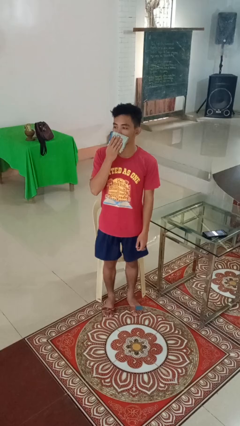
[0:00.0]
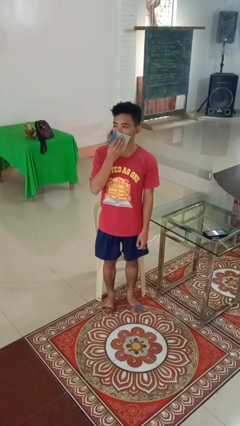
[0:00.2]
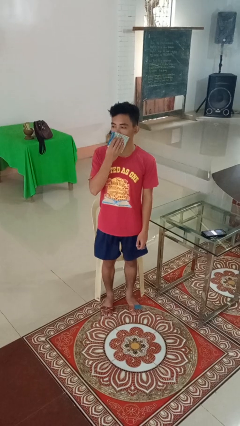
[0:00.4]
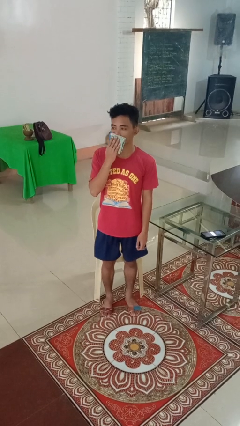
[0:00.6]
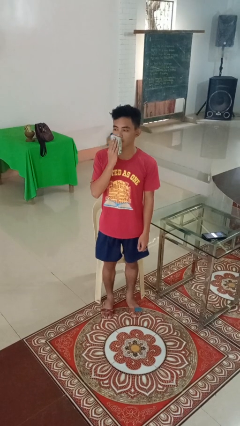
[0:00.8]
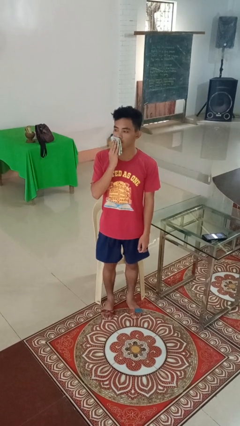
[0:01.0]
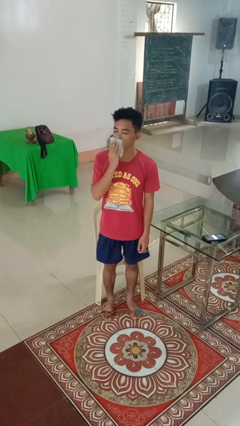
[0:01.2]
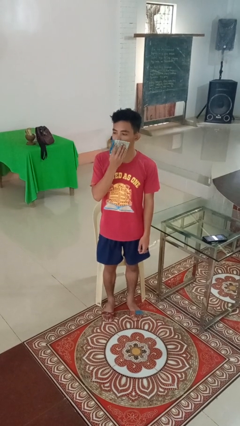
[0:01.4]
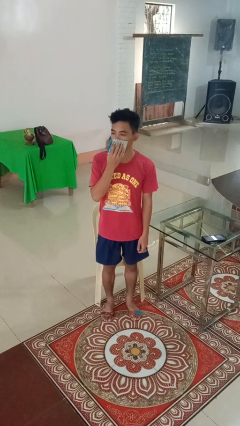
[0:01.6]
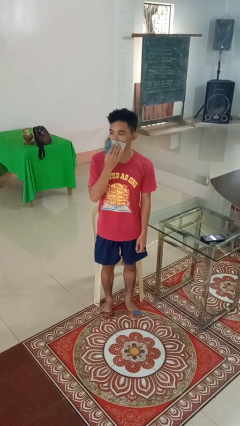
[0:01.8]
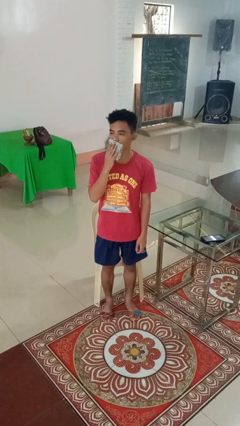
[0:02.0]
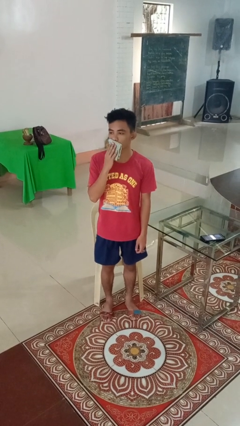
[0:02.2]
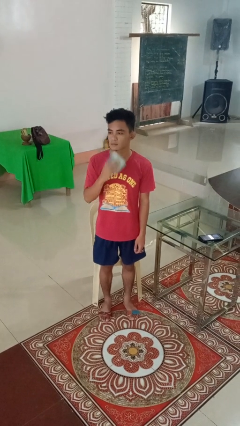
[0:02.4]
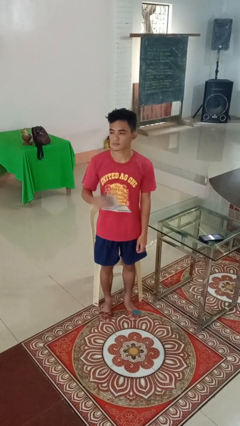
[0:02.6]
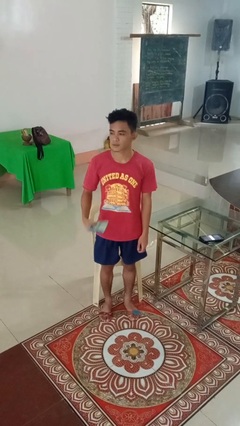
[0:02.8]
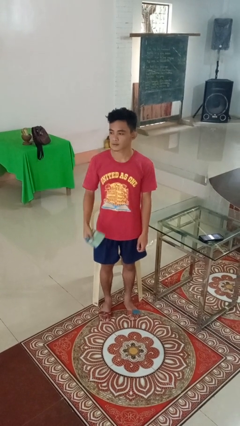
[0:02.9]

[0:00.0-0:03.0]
person wipes mouth with napkin

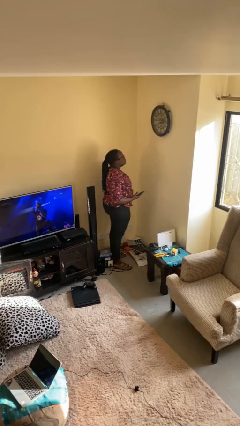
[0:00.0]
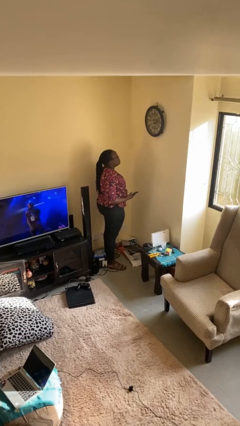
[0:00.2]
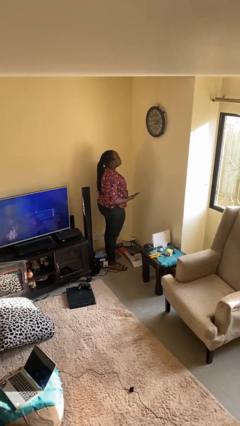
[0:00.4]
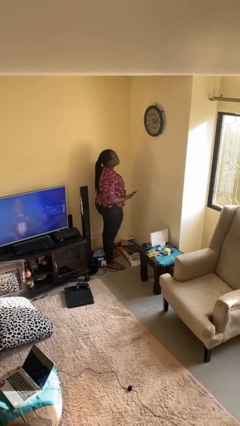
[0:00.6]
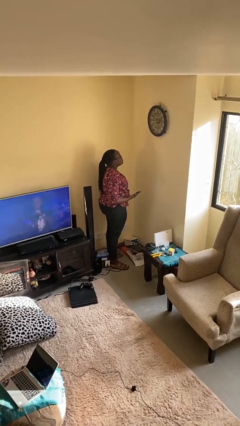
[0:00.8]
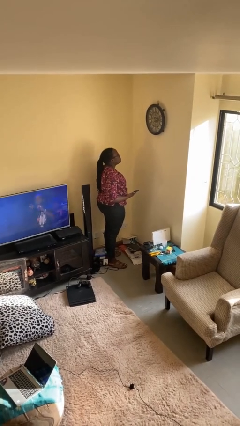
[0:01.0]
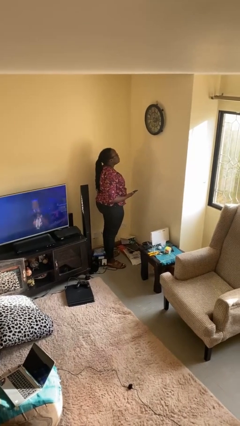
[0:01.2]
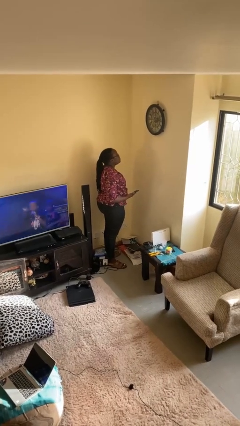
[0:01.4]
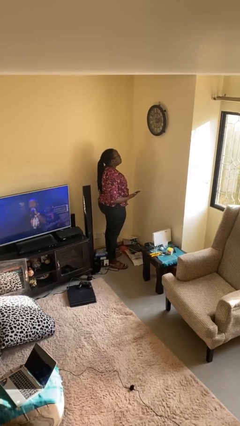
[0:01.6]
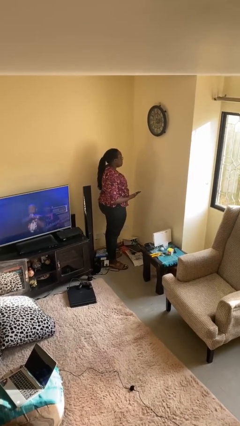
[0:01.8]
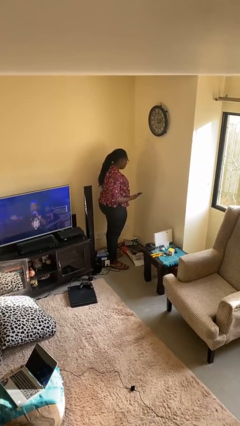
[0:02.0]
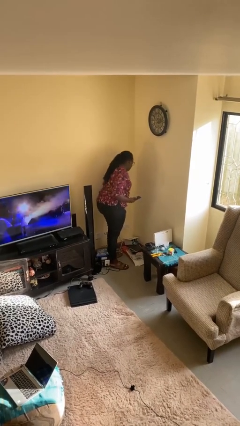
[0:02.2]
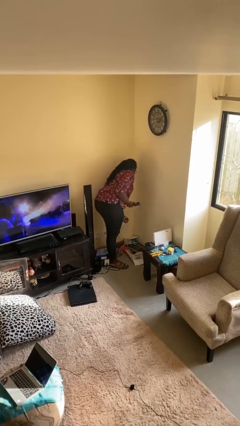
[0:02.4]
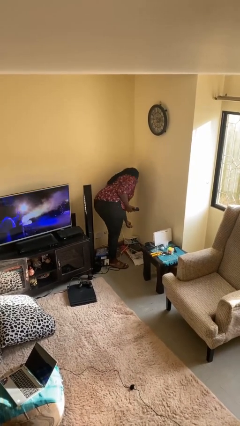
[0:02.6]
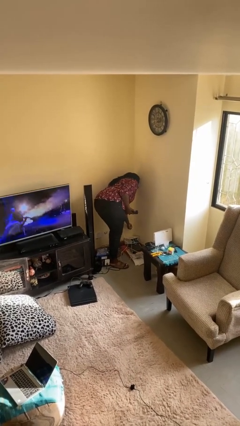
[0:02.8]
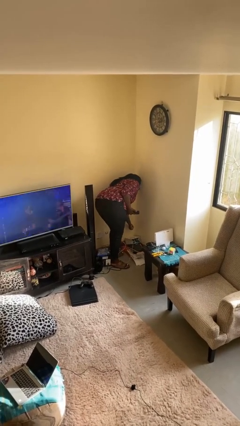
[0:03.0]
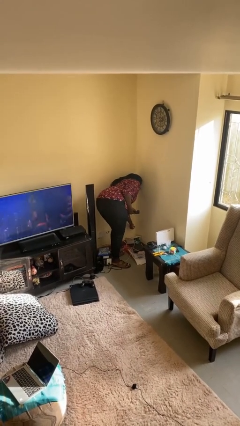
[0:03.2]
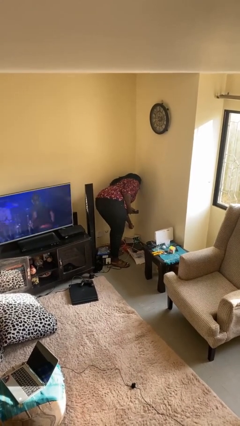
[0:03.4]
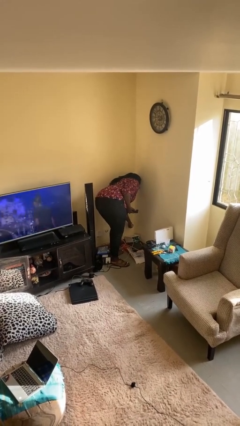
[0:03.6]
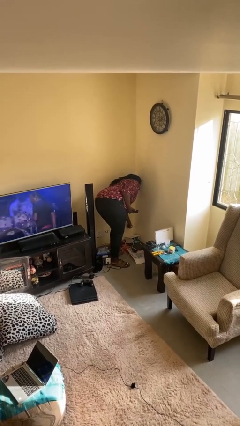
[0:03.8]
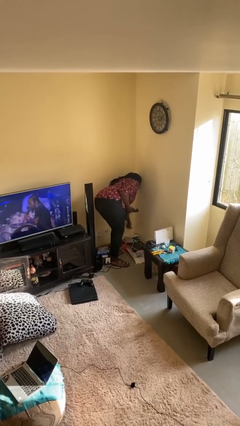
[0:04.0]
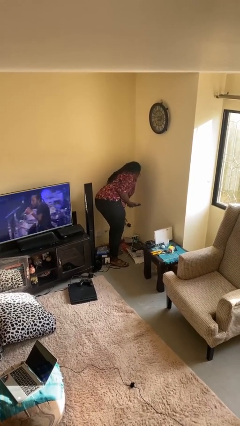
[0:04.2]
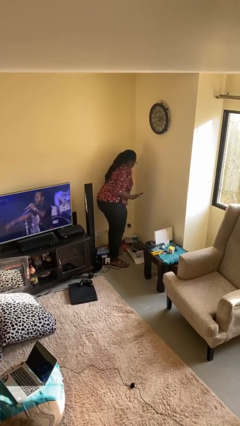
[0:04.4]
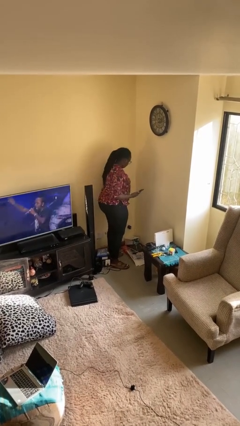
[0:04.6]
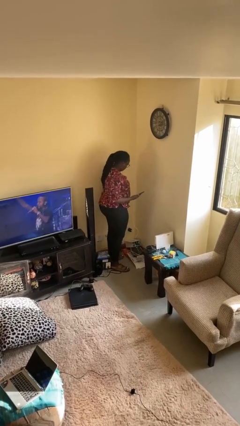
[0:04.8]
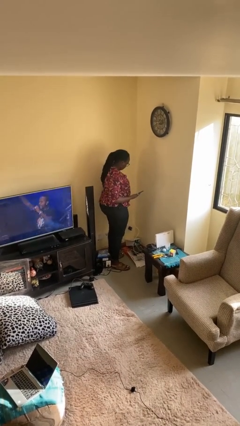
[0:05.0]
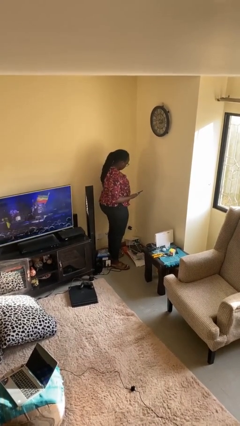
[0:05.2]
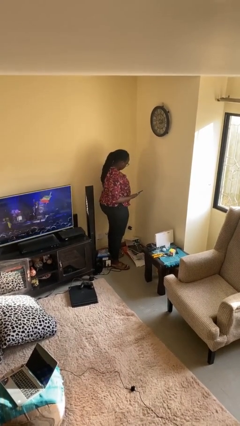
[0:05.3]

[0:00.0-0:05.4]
person plugs into electrical socket

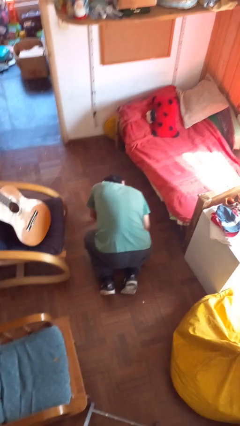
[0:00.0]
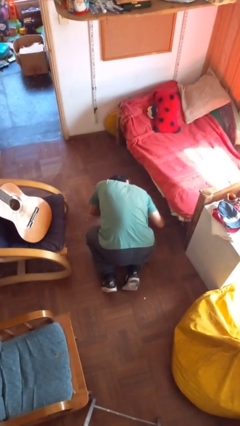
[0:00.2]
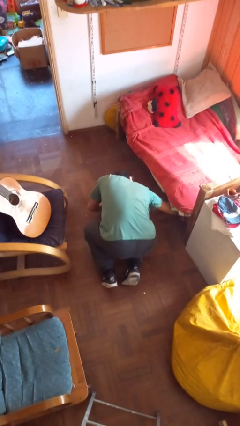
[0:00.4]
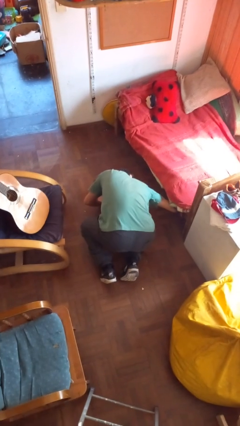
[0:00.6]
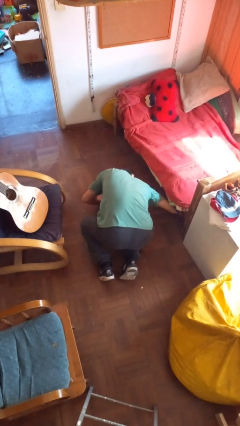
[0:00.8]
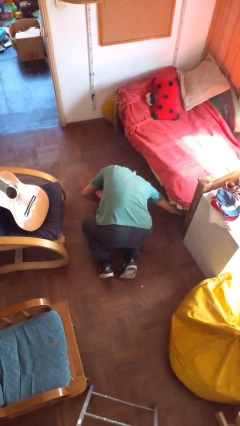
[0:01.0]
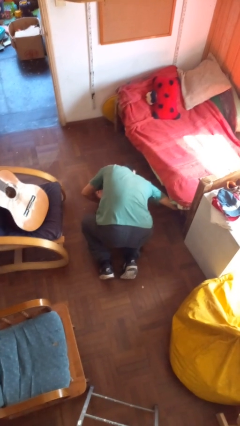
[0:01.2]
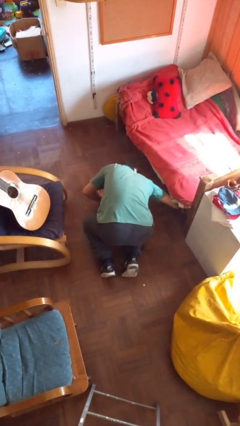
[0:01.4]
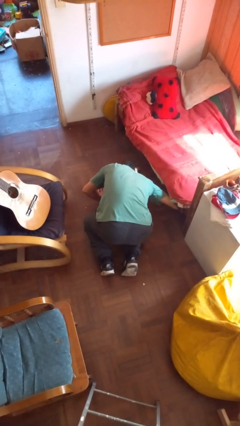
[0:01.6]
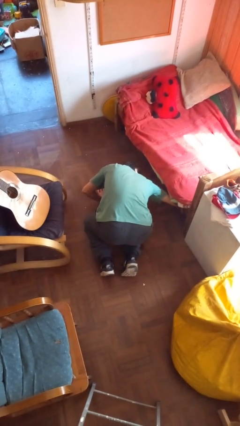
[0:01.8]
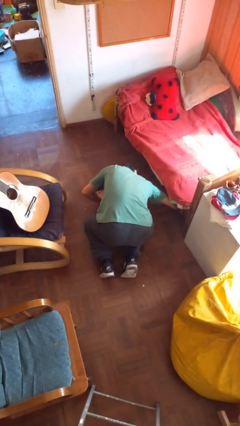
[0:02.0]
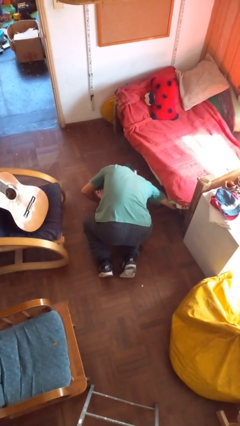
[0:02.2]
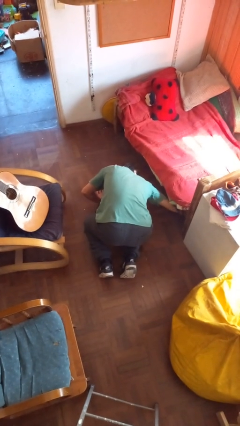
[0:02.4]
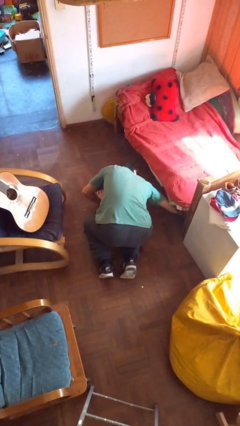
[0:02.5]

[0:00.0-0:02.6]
person searches under bed

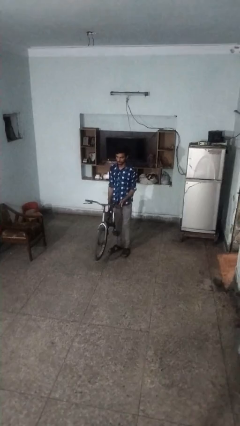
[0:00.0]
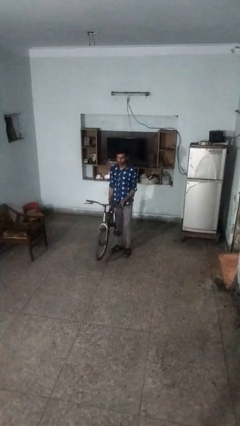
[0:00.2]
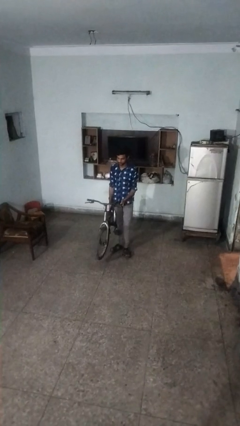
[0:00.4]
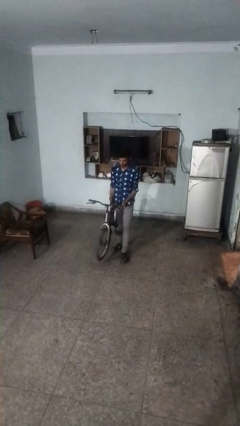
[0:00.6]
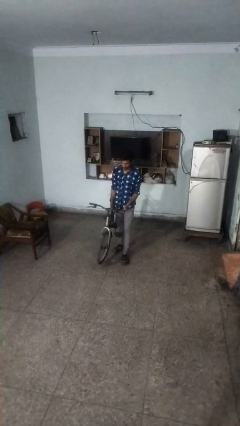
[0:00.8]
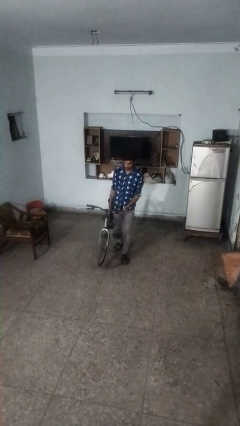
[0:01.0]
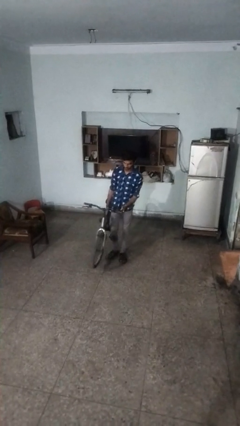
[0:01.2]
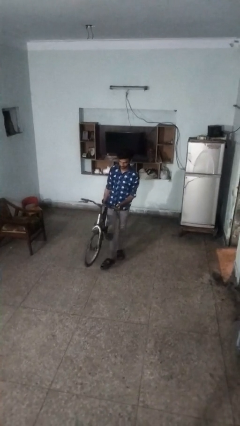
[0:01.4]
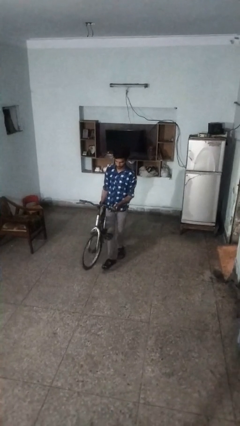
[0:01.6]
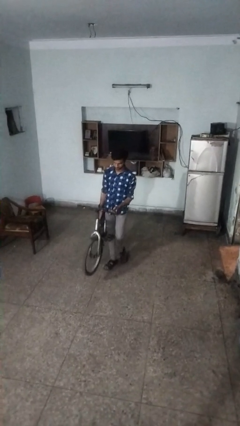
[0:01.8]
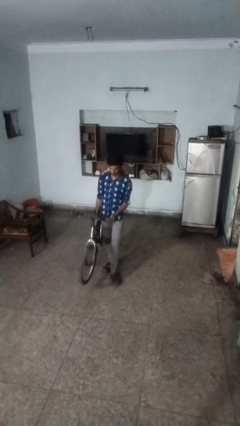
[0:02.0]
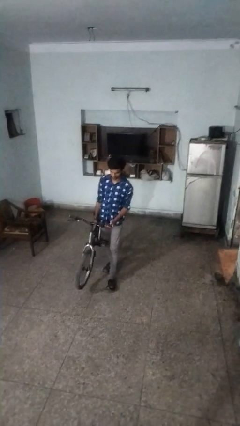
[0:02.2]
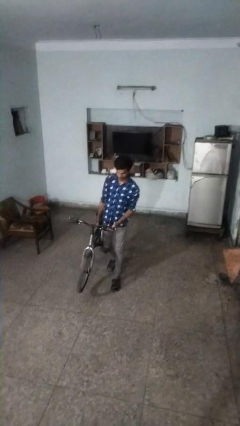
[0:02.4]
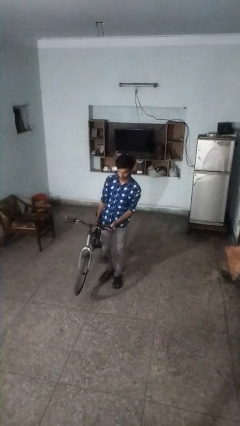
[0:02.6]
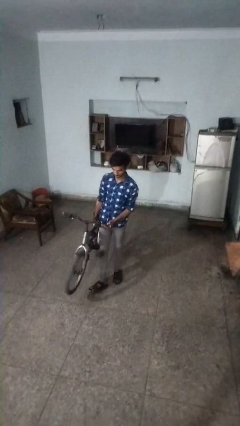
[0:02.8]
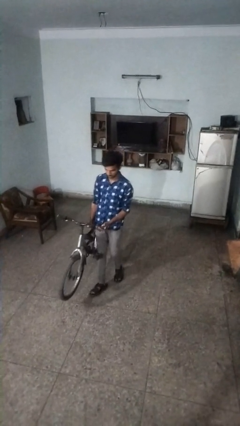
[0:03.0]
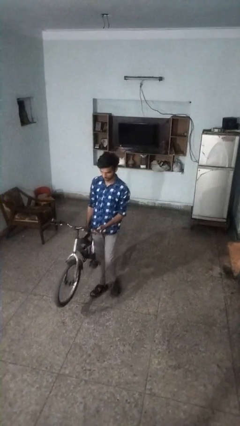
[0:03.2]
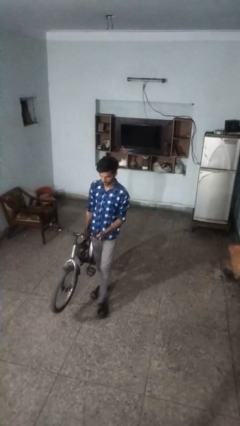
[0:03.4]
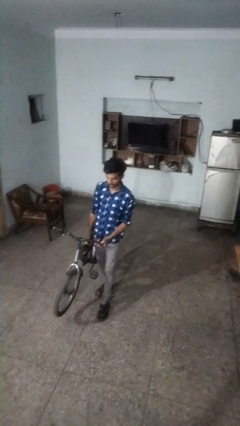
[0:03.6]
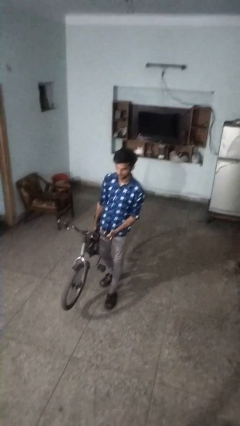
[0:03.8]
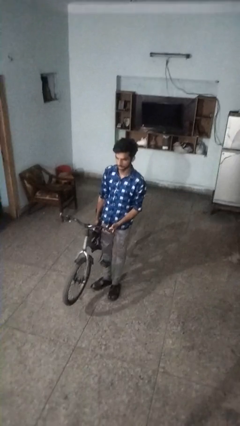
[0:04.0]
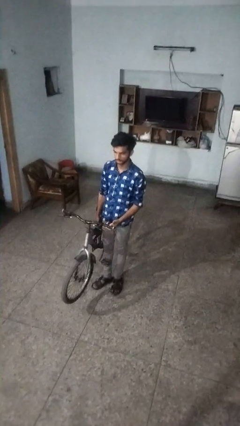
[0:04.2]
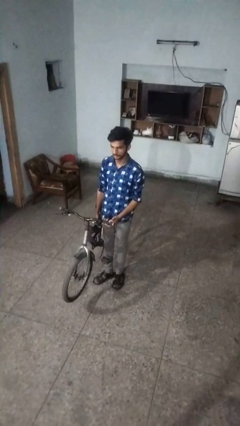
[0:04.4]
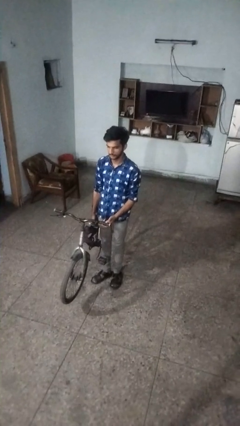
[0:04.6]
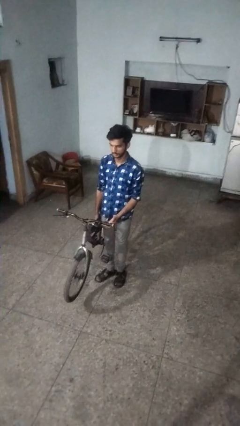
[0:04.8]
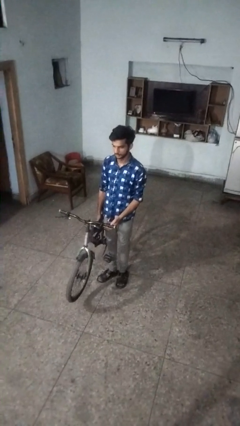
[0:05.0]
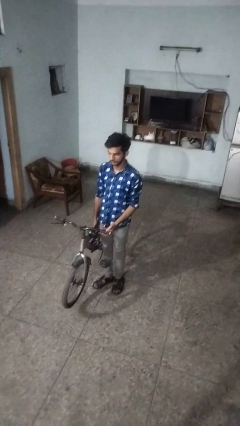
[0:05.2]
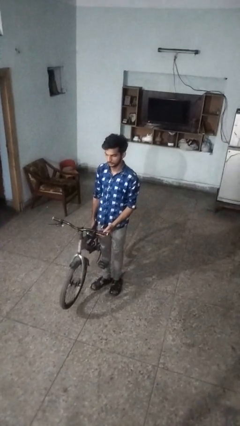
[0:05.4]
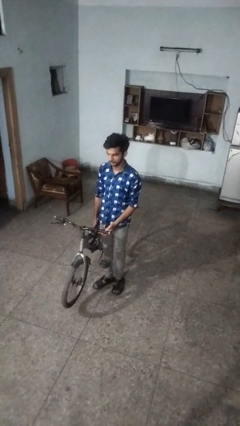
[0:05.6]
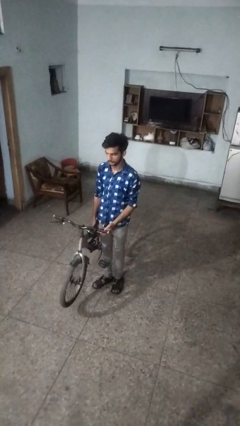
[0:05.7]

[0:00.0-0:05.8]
person carries bicycle

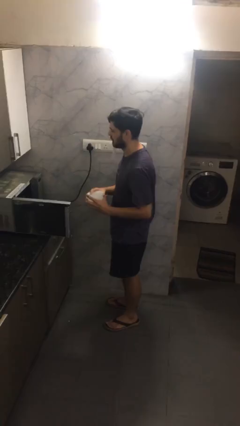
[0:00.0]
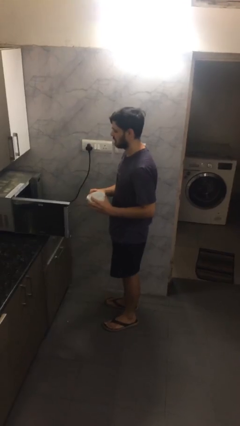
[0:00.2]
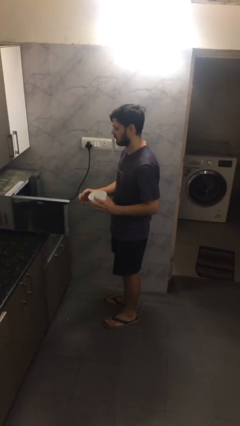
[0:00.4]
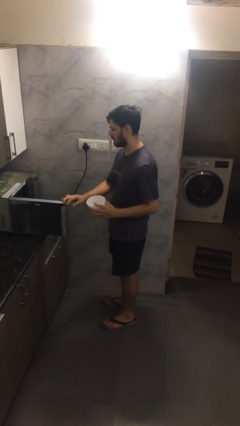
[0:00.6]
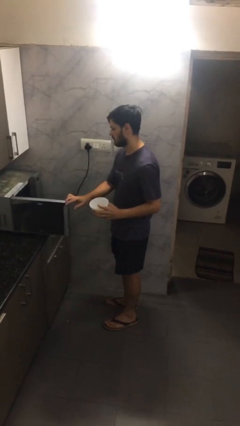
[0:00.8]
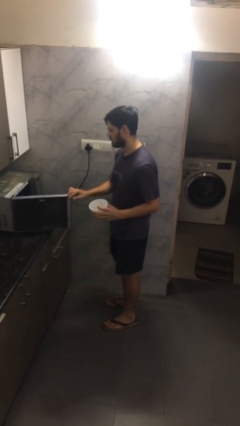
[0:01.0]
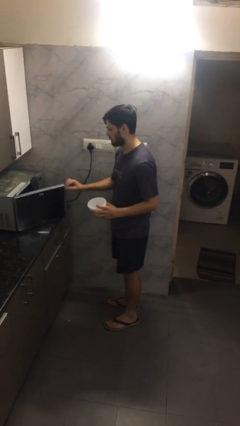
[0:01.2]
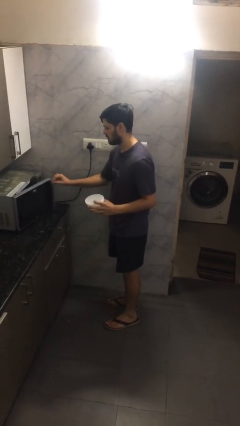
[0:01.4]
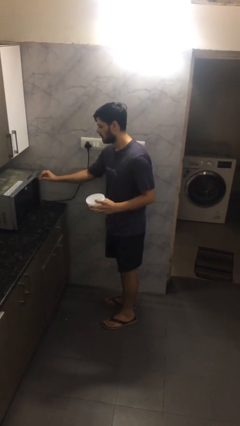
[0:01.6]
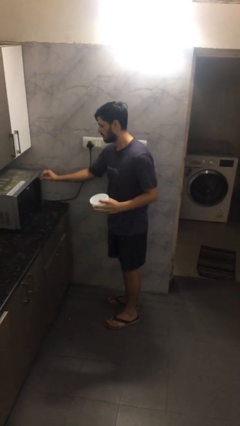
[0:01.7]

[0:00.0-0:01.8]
person closes microwave
